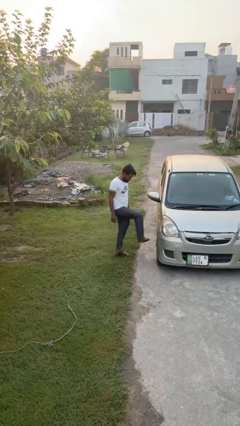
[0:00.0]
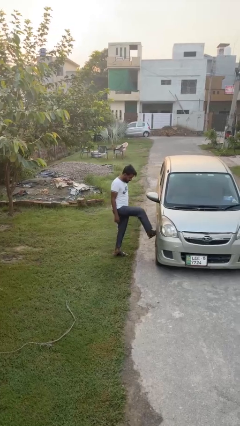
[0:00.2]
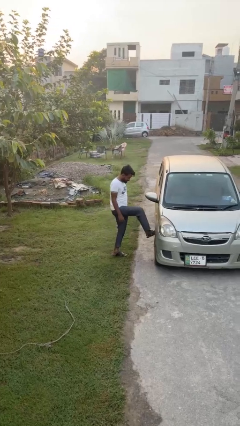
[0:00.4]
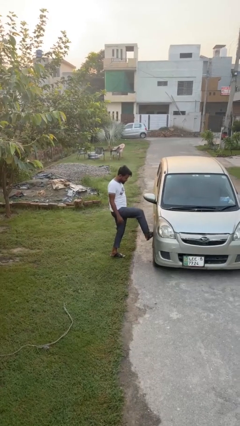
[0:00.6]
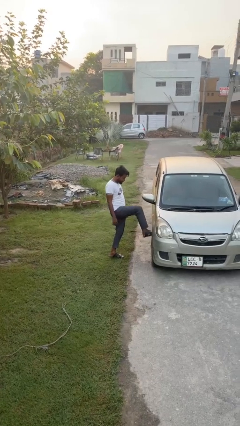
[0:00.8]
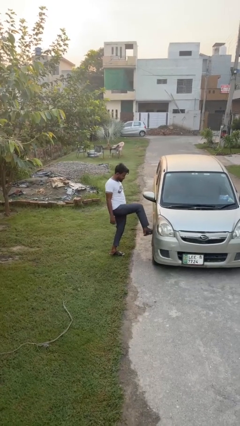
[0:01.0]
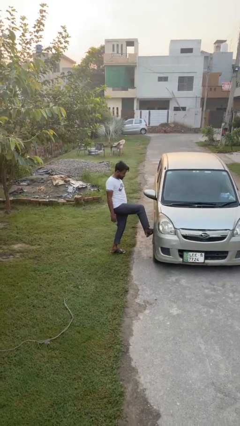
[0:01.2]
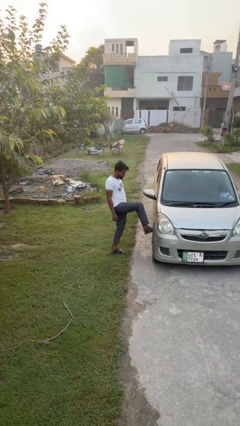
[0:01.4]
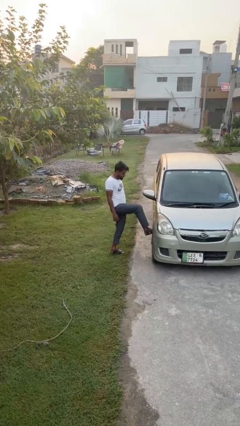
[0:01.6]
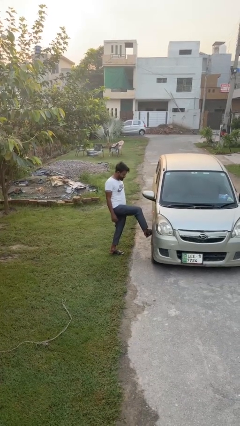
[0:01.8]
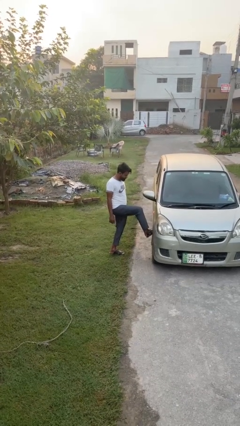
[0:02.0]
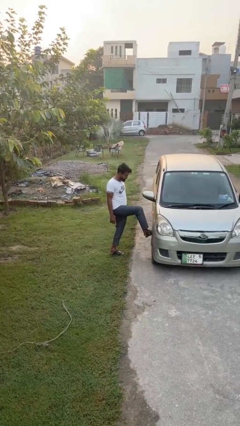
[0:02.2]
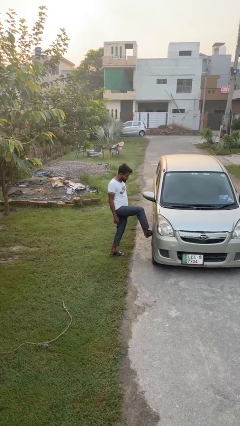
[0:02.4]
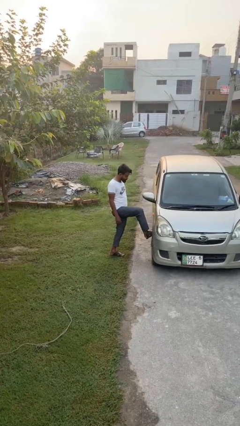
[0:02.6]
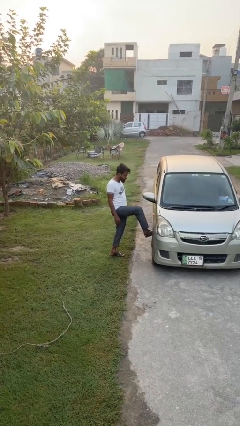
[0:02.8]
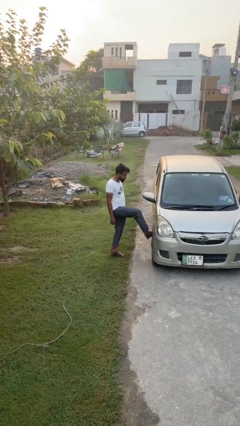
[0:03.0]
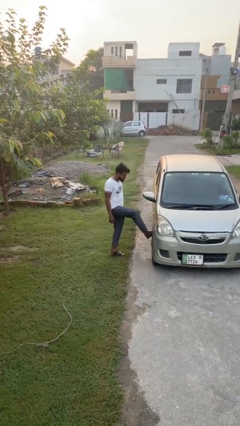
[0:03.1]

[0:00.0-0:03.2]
person kicks car tires

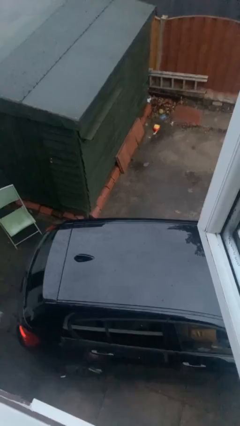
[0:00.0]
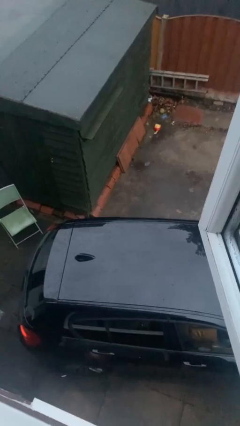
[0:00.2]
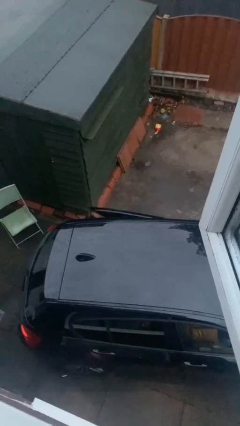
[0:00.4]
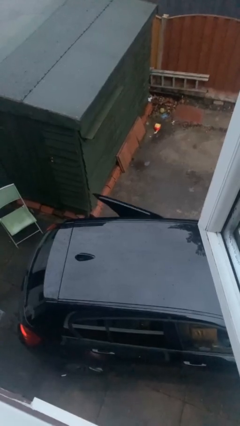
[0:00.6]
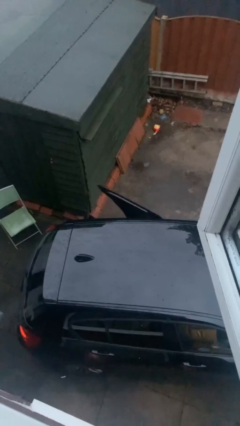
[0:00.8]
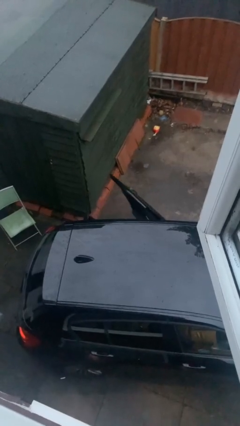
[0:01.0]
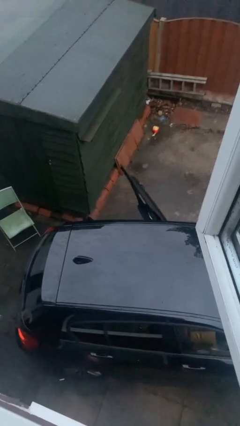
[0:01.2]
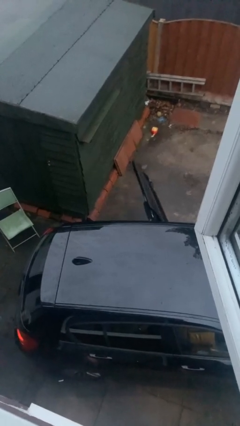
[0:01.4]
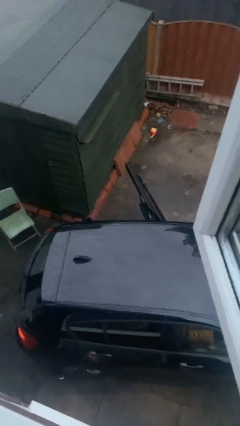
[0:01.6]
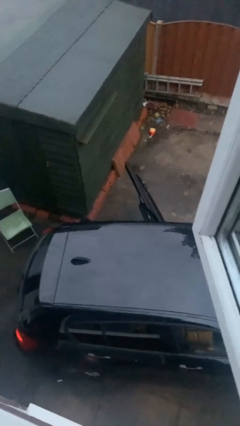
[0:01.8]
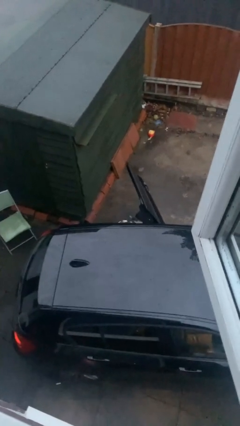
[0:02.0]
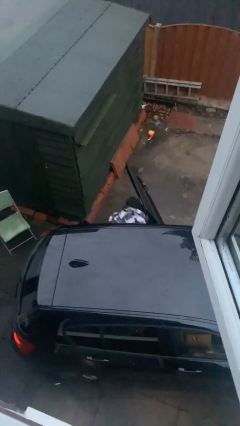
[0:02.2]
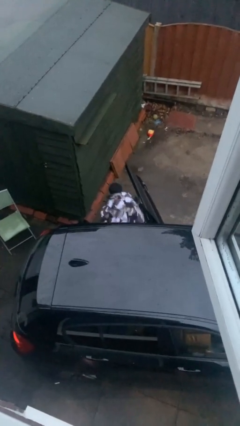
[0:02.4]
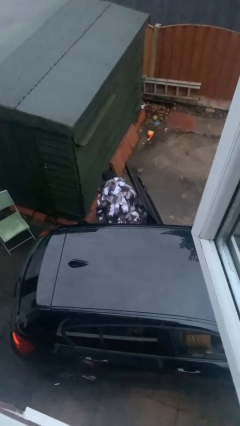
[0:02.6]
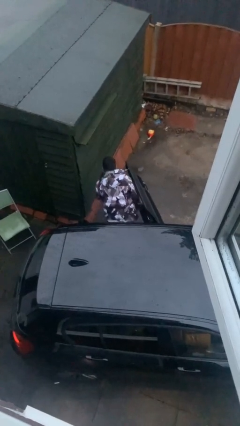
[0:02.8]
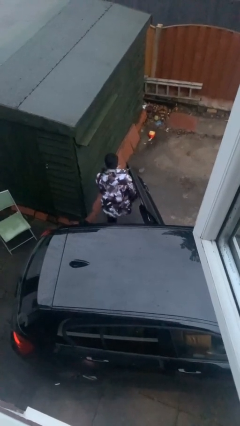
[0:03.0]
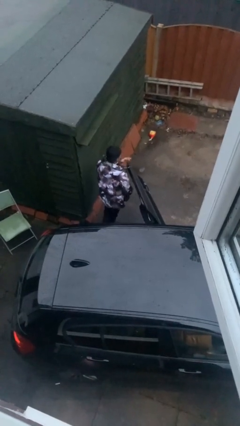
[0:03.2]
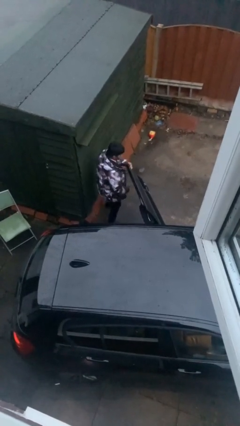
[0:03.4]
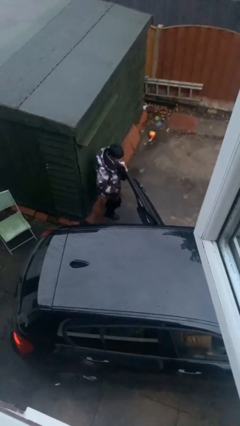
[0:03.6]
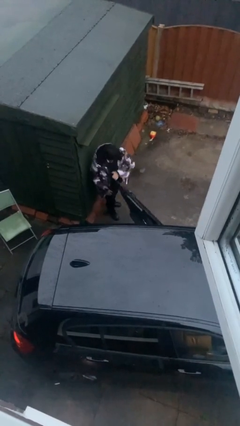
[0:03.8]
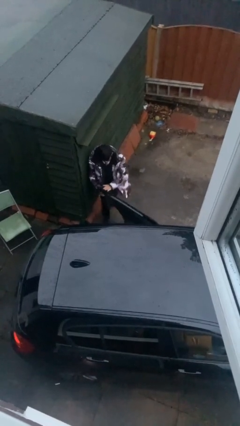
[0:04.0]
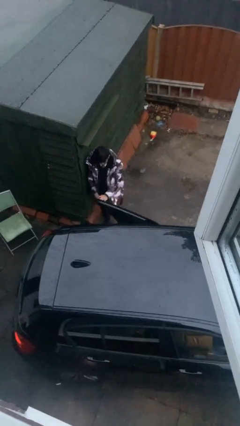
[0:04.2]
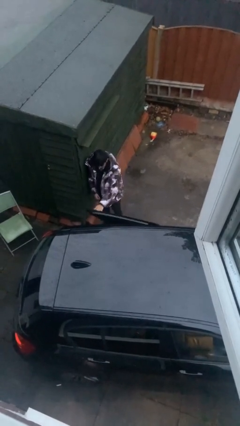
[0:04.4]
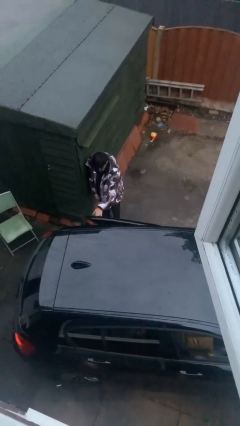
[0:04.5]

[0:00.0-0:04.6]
car drops off person

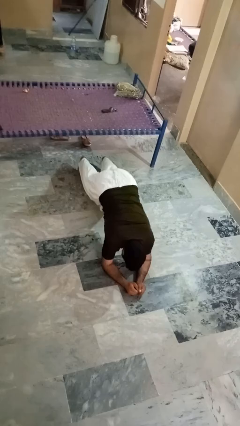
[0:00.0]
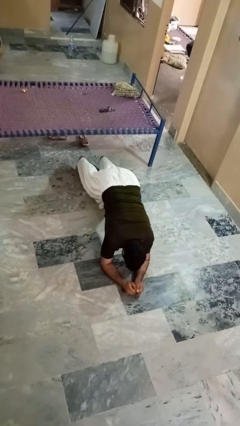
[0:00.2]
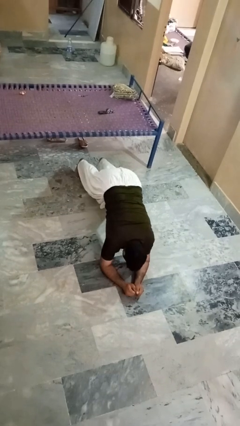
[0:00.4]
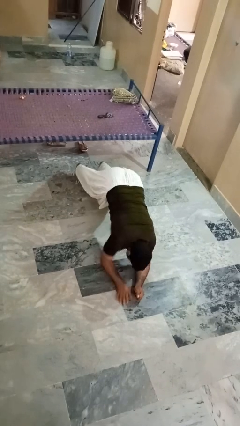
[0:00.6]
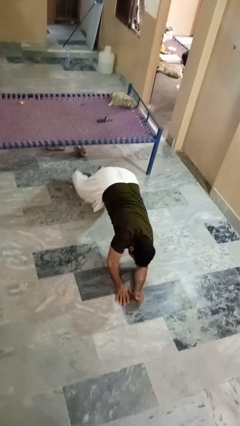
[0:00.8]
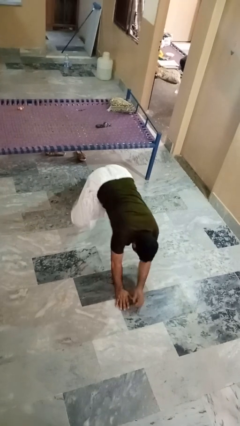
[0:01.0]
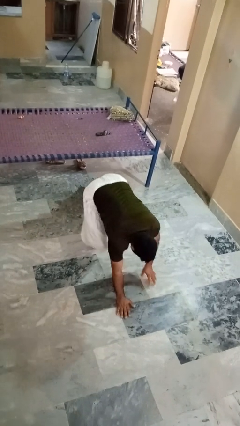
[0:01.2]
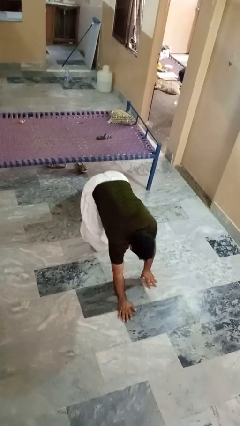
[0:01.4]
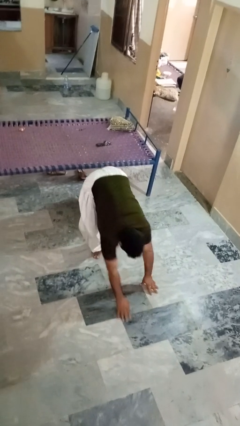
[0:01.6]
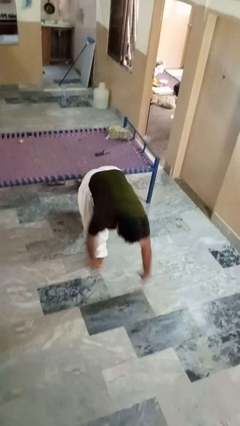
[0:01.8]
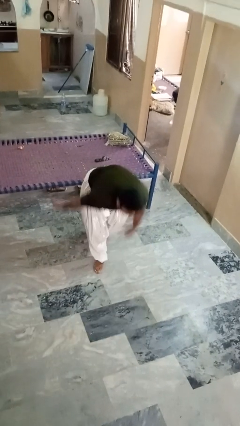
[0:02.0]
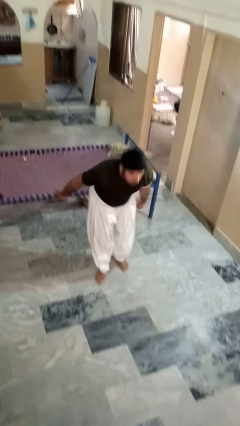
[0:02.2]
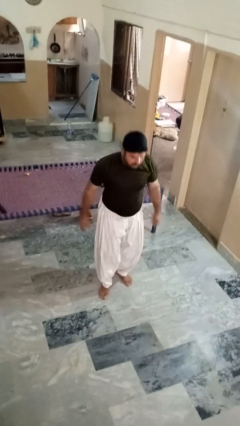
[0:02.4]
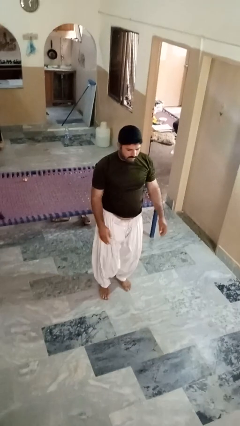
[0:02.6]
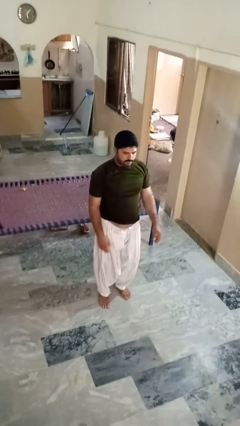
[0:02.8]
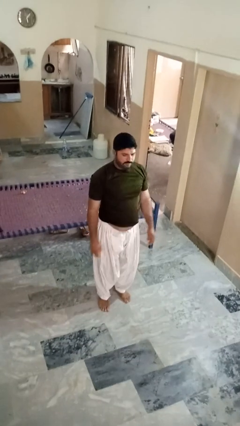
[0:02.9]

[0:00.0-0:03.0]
person stands up from floor

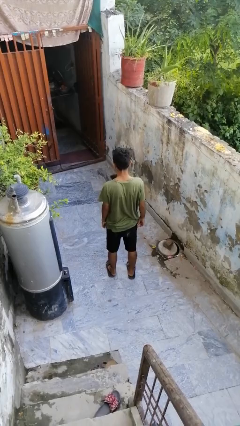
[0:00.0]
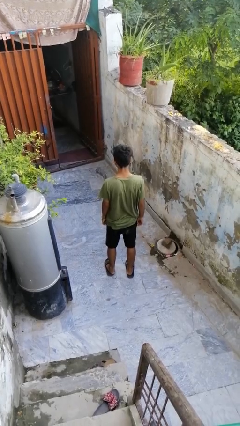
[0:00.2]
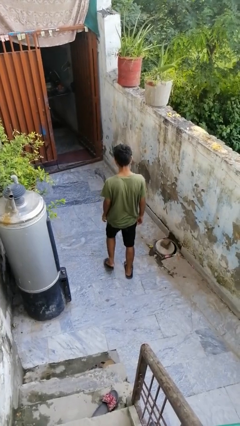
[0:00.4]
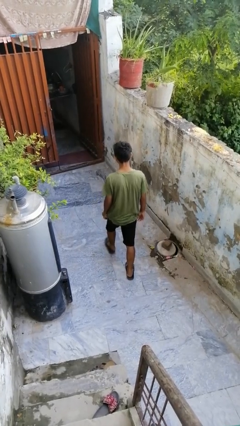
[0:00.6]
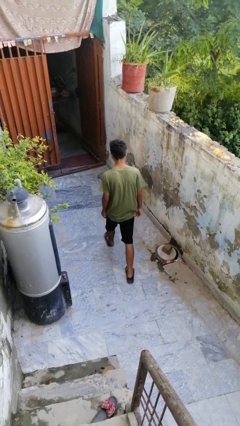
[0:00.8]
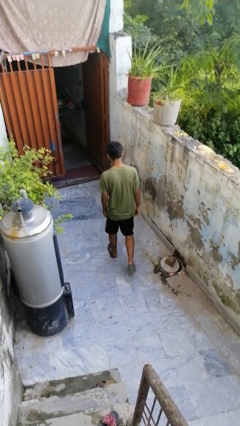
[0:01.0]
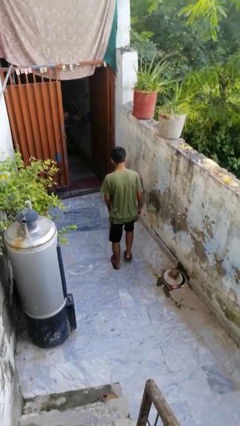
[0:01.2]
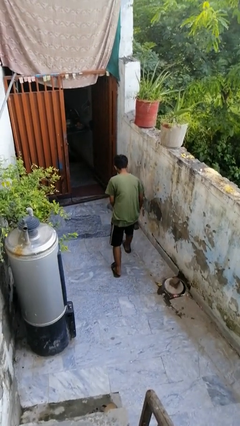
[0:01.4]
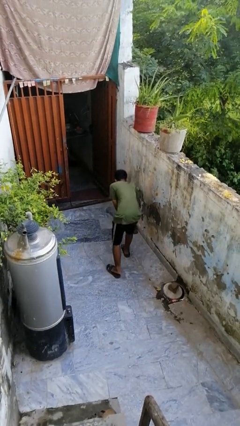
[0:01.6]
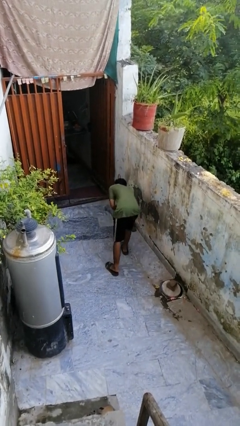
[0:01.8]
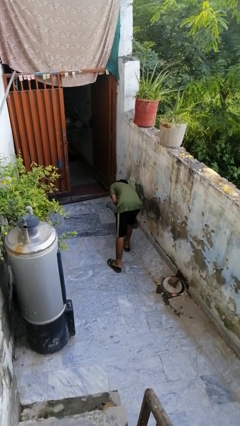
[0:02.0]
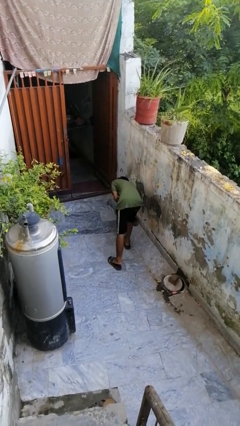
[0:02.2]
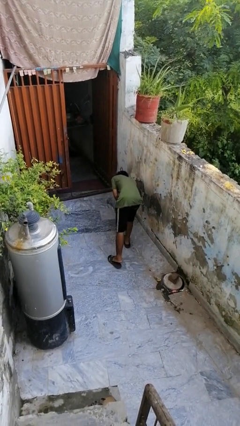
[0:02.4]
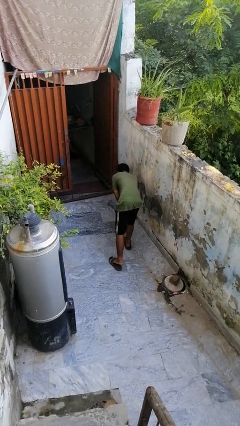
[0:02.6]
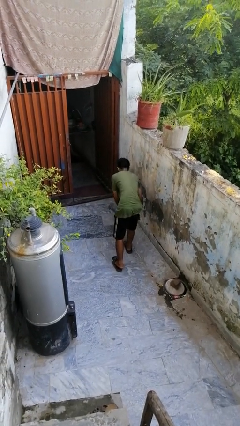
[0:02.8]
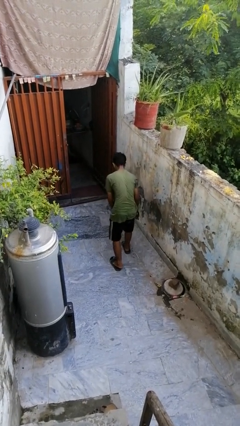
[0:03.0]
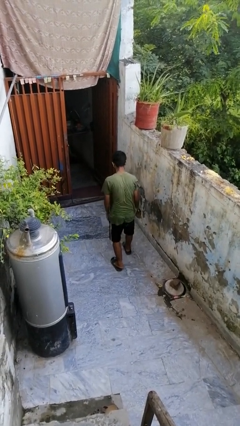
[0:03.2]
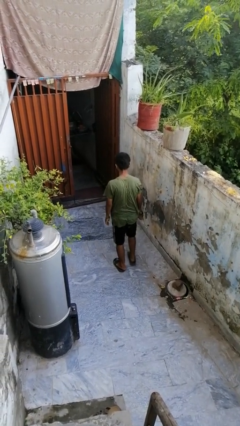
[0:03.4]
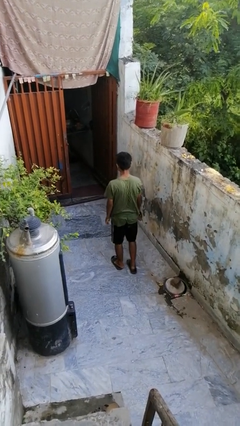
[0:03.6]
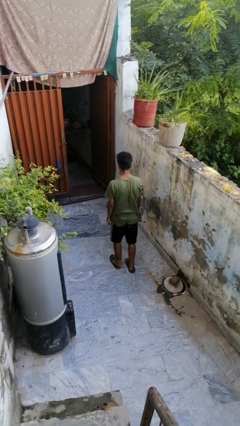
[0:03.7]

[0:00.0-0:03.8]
person picks up object from floor

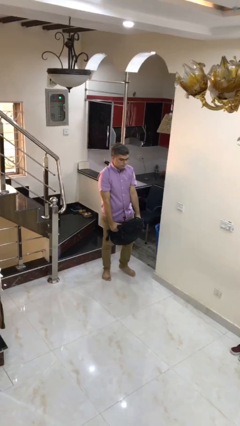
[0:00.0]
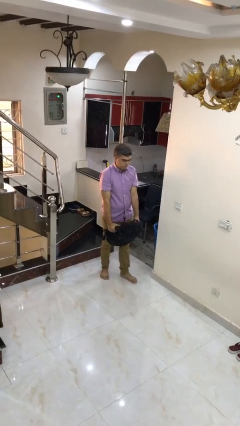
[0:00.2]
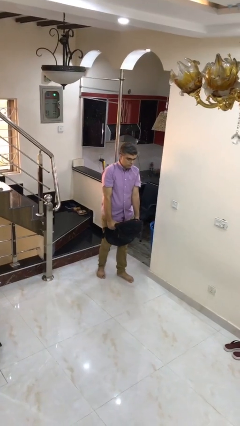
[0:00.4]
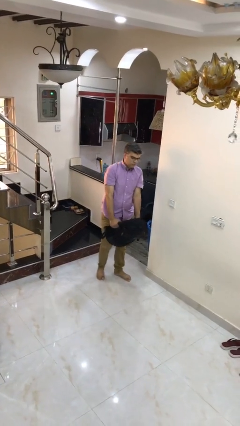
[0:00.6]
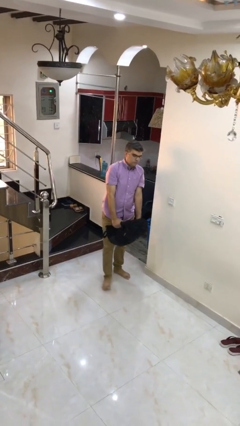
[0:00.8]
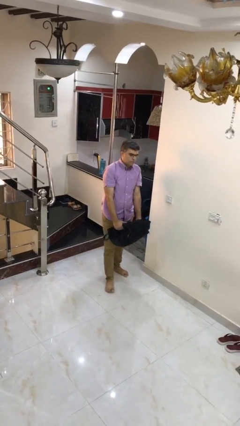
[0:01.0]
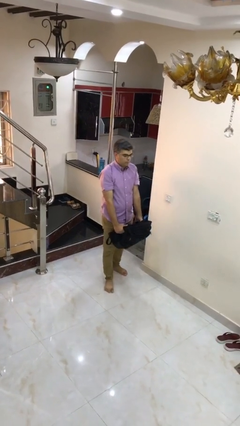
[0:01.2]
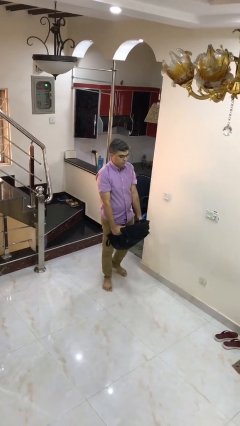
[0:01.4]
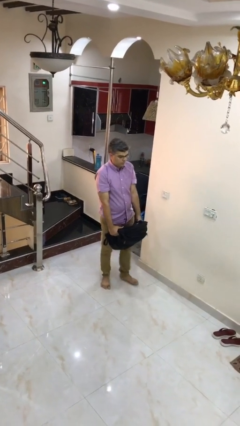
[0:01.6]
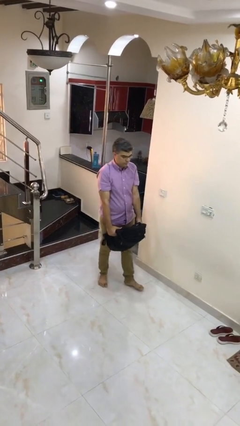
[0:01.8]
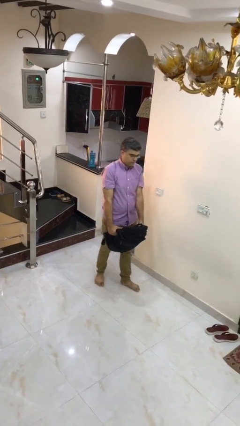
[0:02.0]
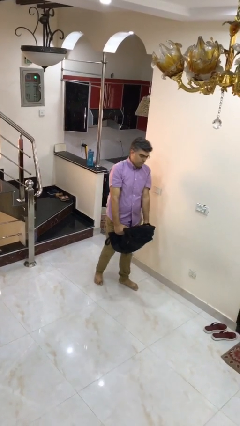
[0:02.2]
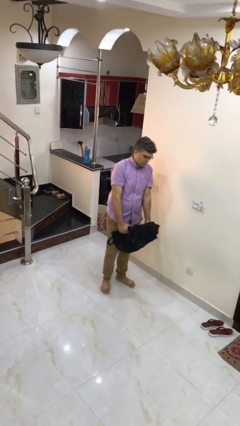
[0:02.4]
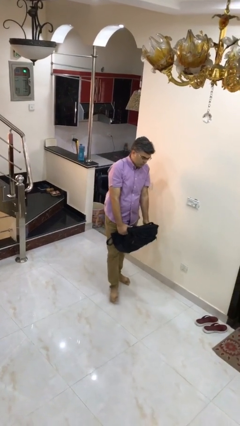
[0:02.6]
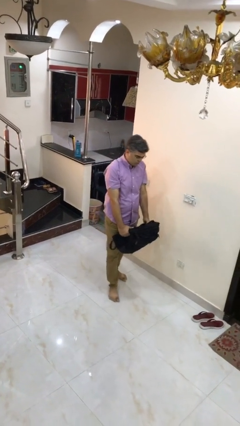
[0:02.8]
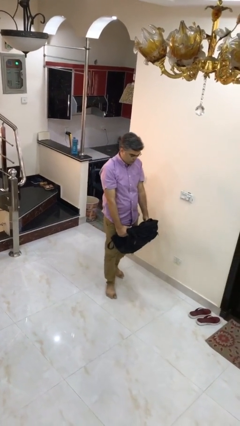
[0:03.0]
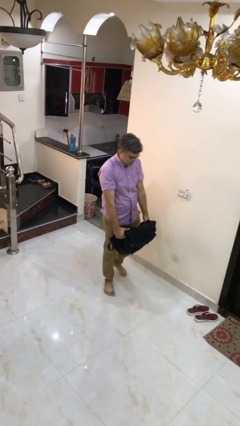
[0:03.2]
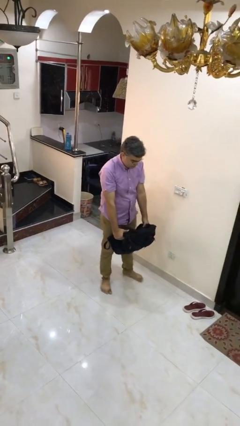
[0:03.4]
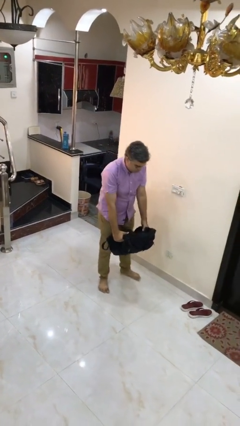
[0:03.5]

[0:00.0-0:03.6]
person carries heavy object
